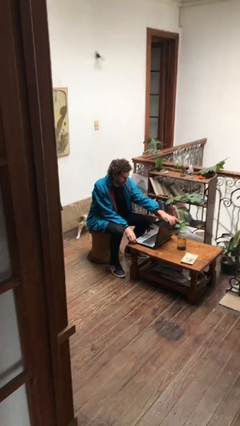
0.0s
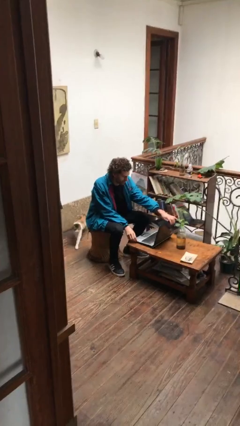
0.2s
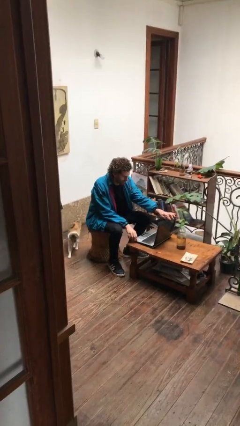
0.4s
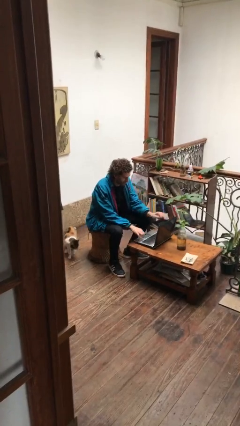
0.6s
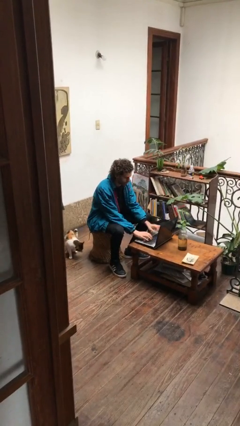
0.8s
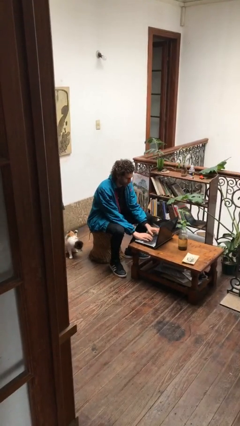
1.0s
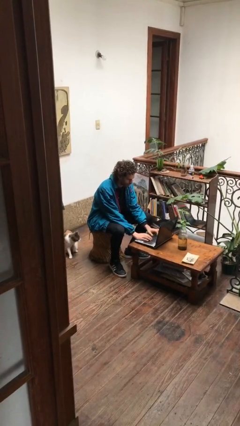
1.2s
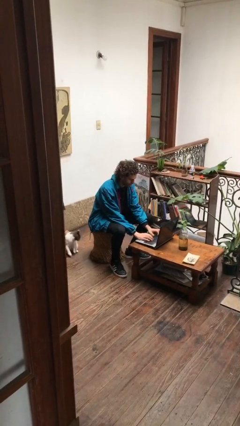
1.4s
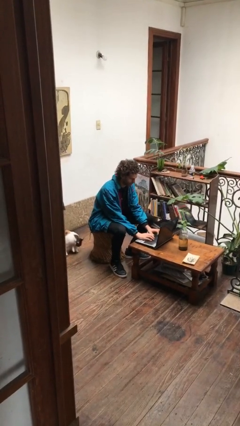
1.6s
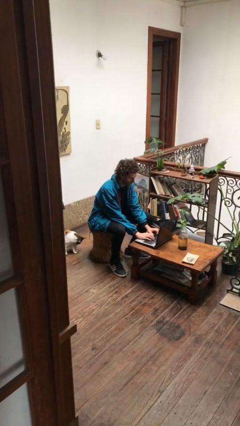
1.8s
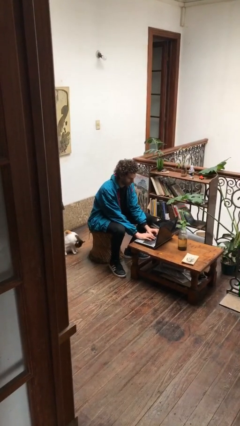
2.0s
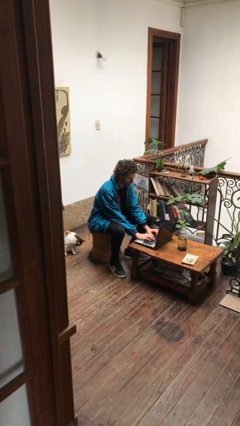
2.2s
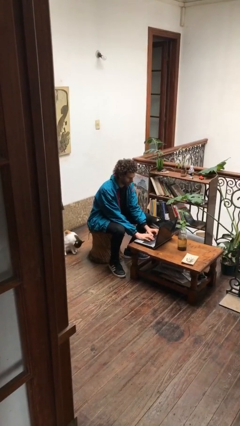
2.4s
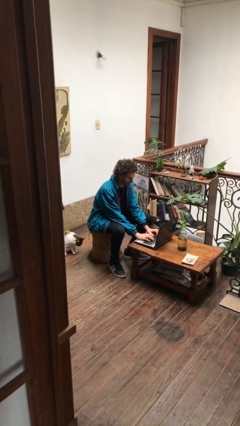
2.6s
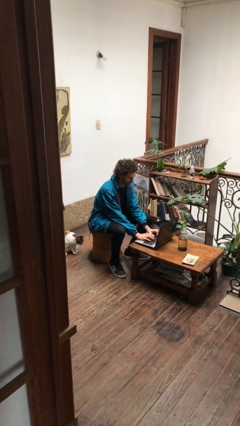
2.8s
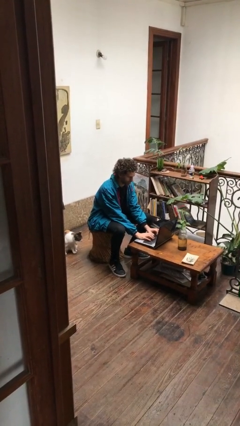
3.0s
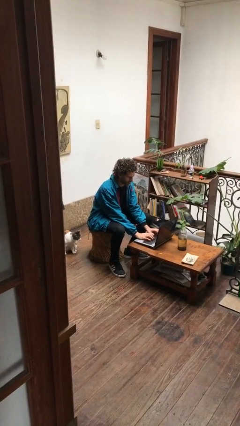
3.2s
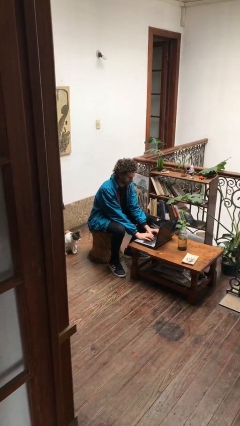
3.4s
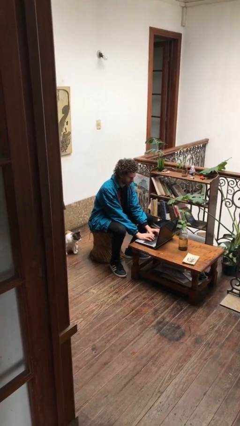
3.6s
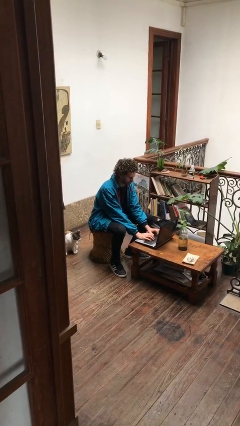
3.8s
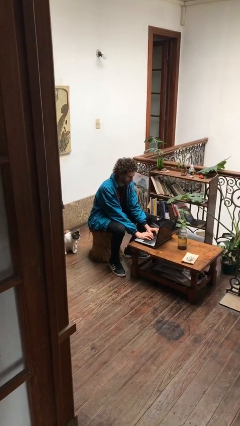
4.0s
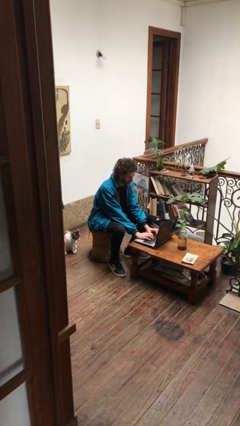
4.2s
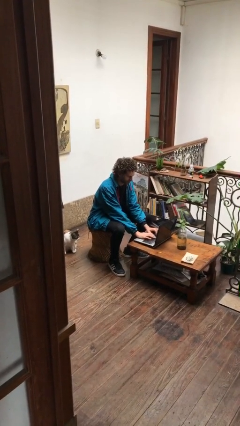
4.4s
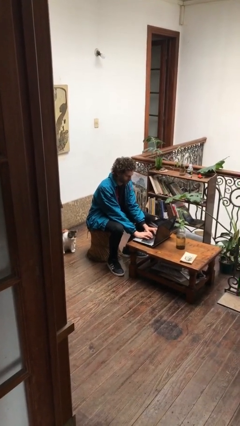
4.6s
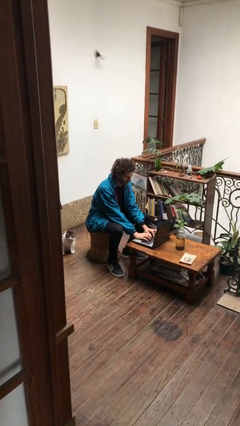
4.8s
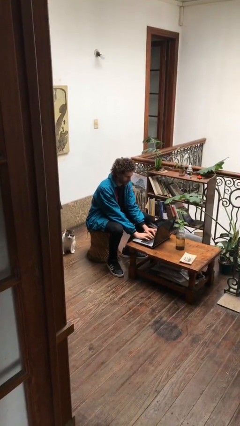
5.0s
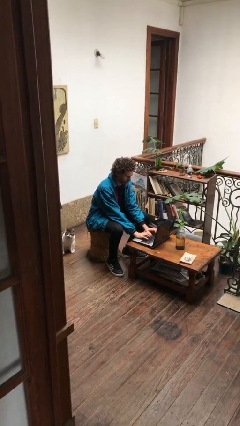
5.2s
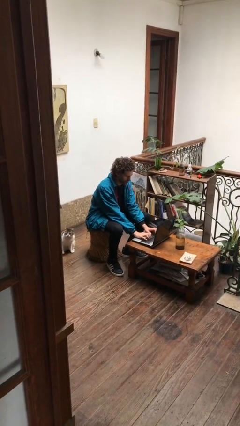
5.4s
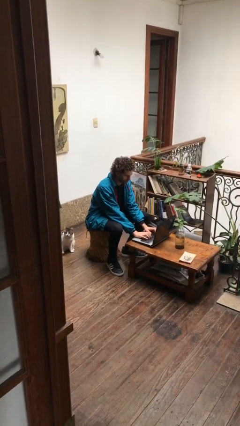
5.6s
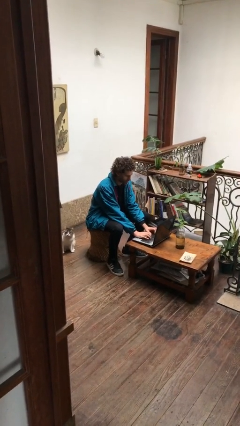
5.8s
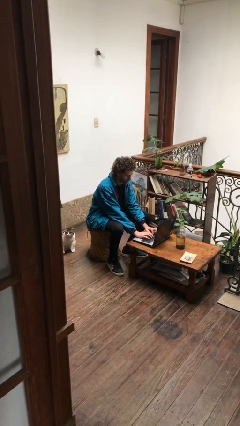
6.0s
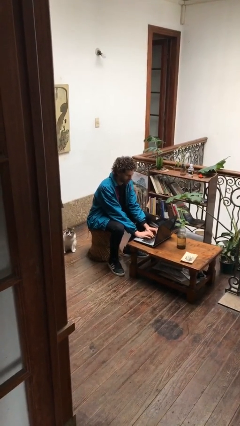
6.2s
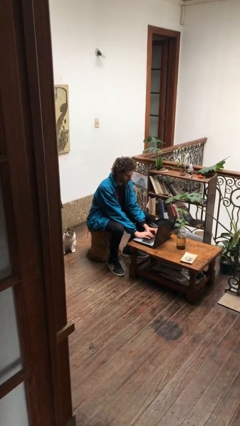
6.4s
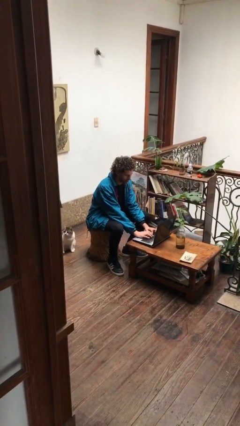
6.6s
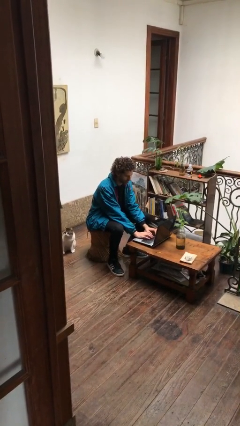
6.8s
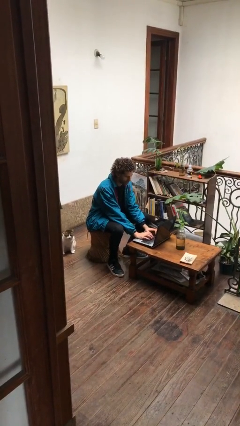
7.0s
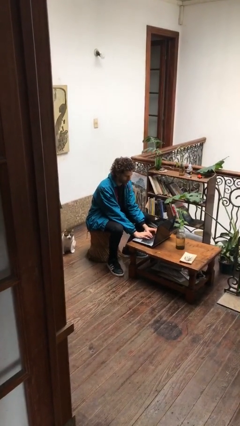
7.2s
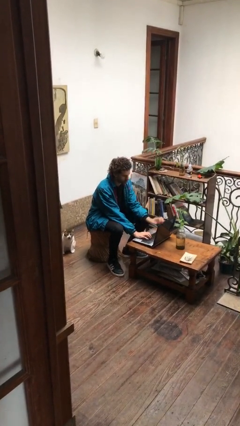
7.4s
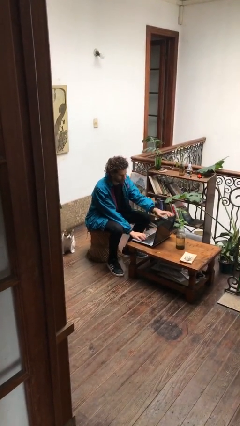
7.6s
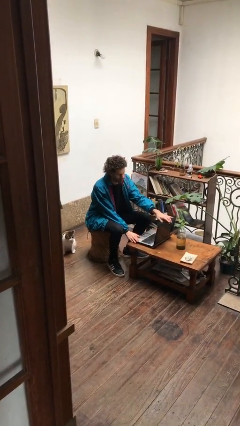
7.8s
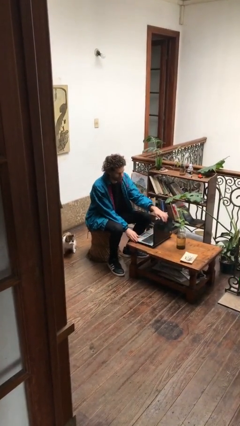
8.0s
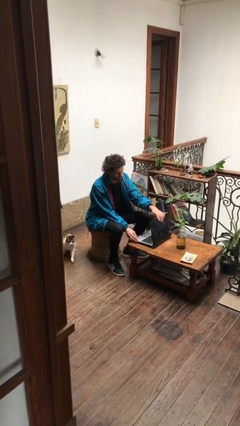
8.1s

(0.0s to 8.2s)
person interacts with laptop

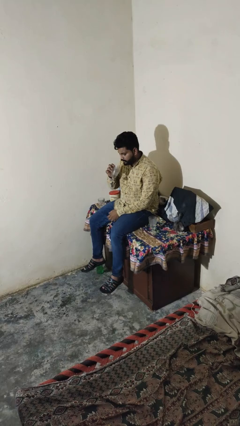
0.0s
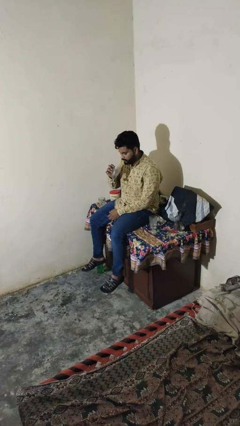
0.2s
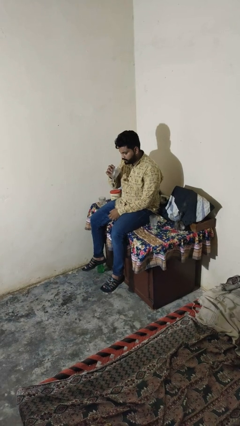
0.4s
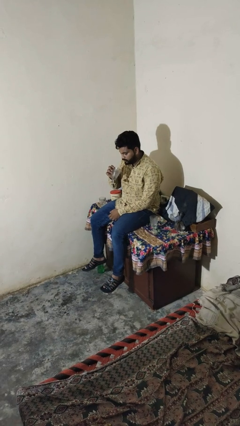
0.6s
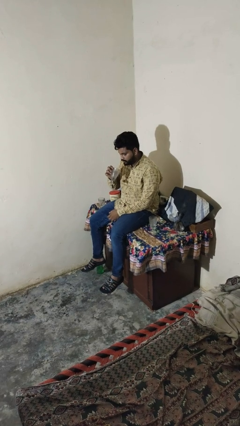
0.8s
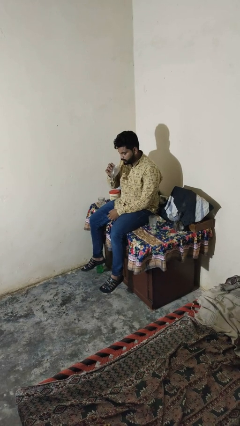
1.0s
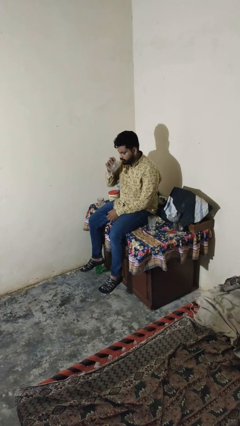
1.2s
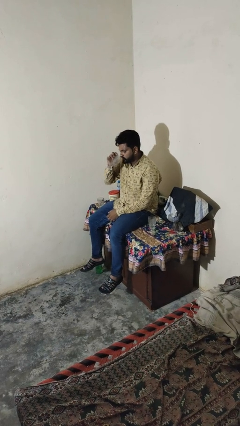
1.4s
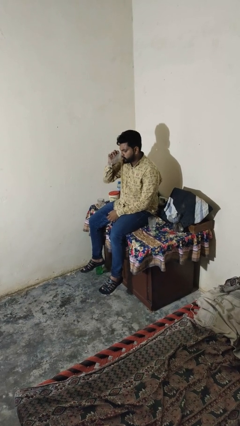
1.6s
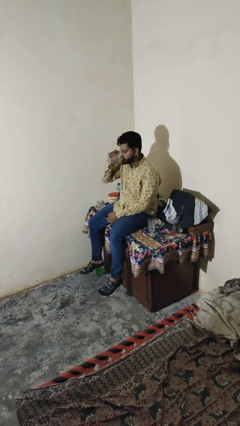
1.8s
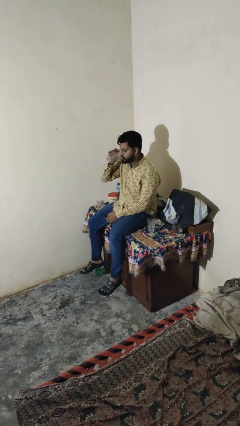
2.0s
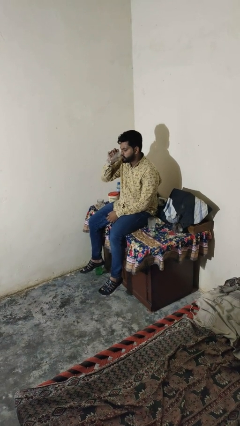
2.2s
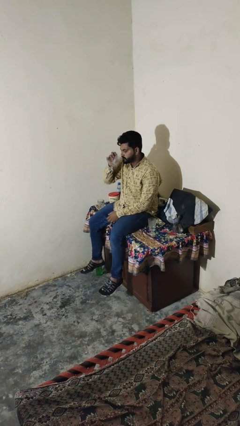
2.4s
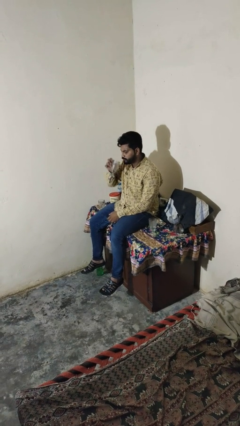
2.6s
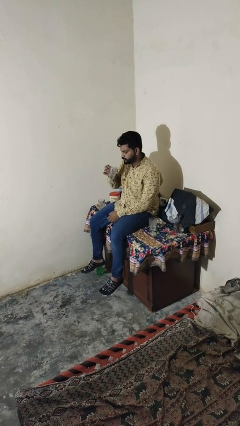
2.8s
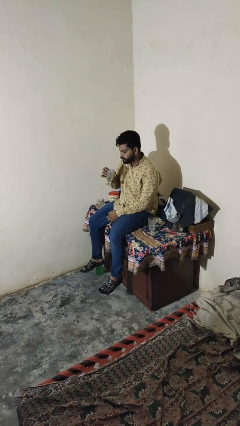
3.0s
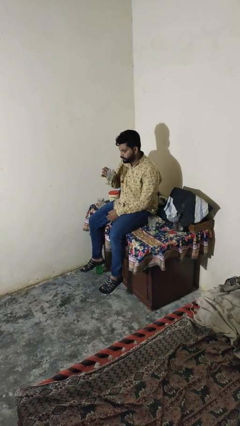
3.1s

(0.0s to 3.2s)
person drinks from shotglass

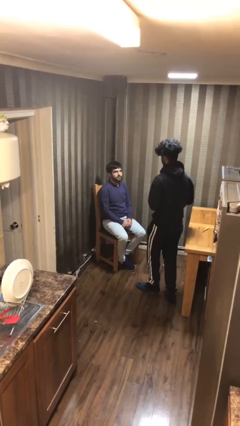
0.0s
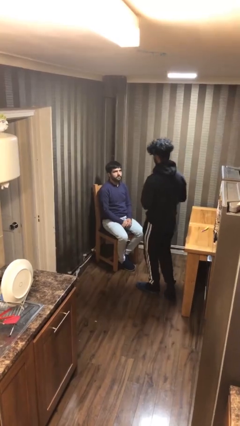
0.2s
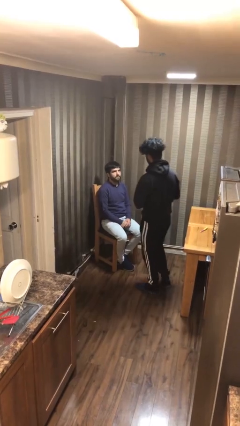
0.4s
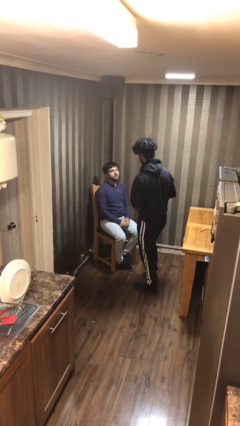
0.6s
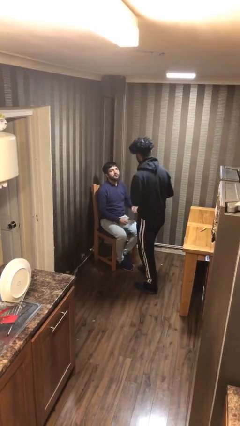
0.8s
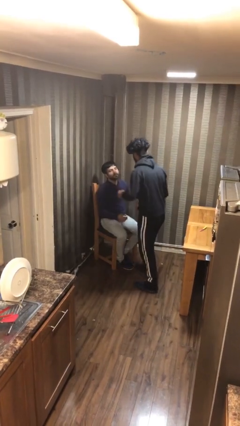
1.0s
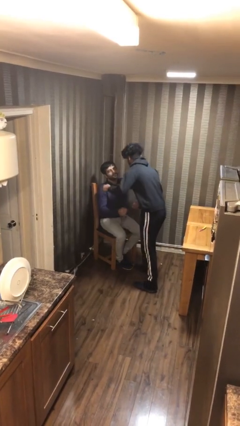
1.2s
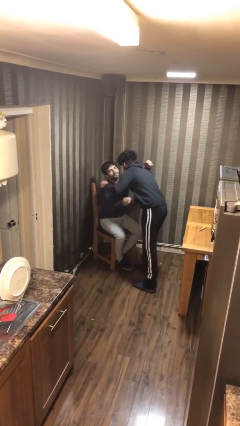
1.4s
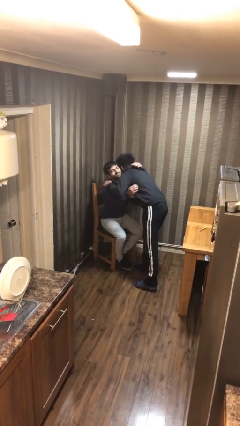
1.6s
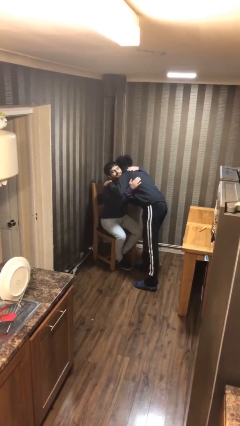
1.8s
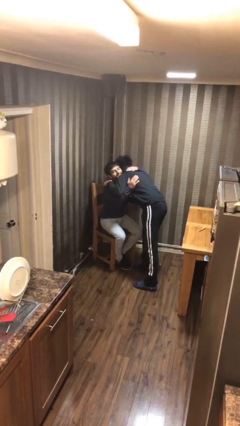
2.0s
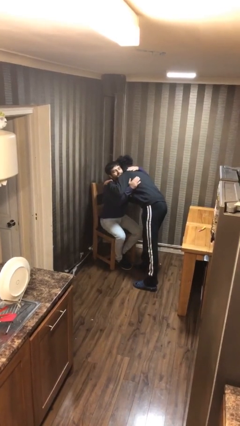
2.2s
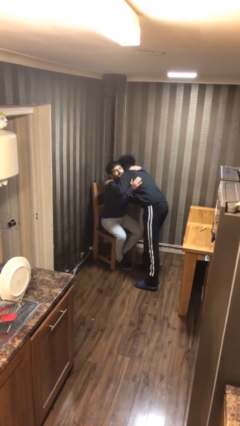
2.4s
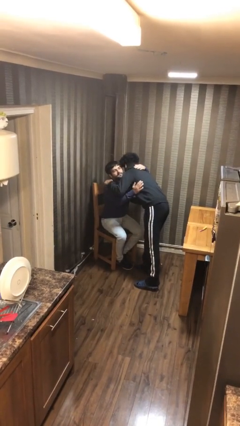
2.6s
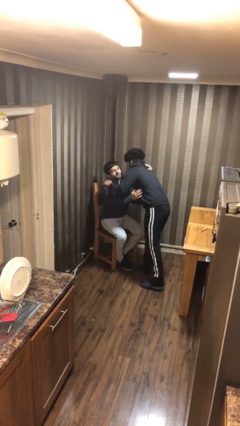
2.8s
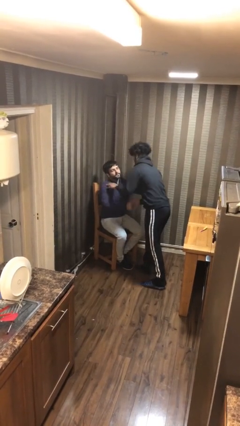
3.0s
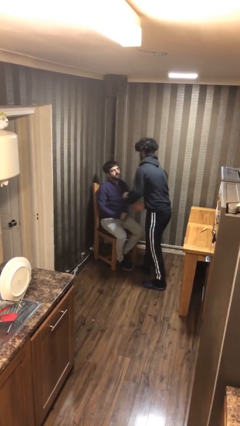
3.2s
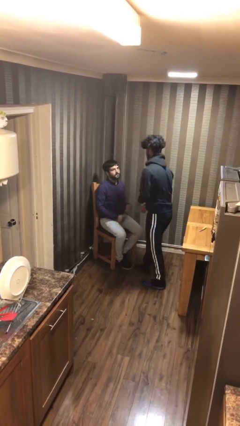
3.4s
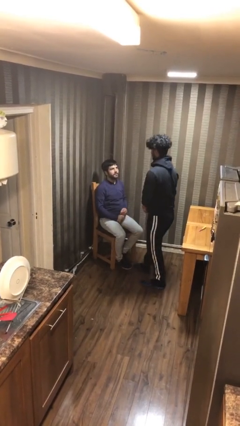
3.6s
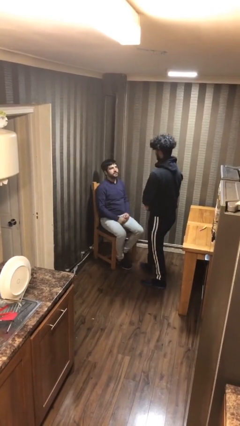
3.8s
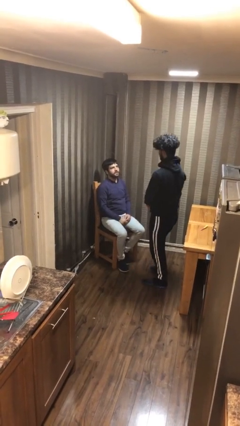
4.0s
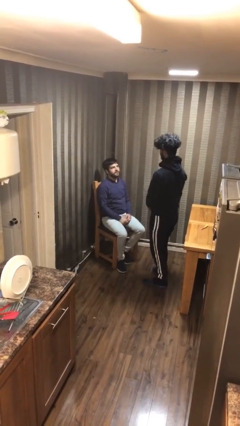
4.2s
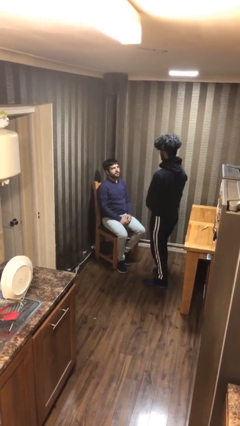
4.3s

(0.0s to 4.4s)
person embraces person

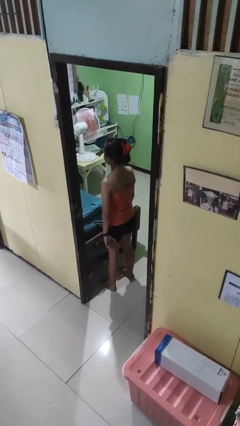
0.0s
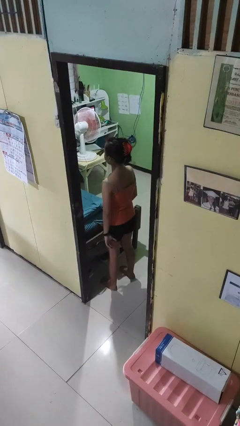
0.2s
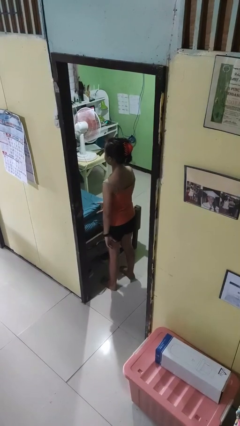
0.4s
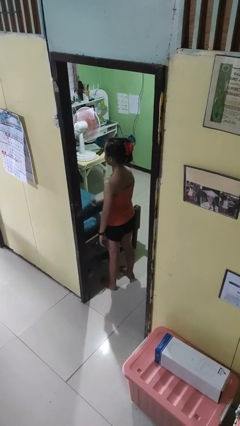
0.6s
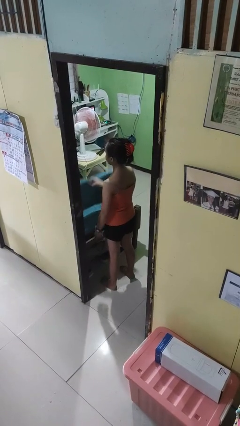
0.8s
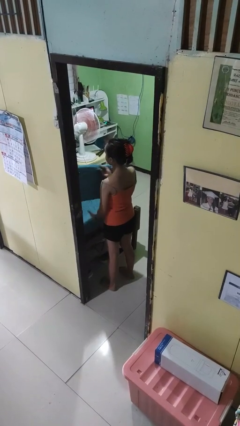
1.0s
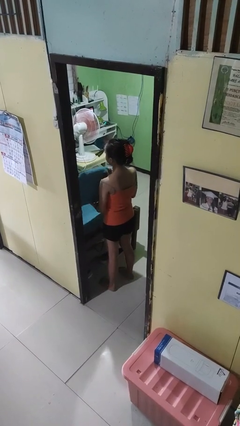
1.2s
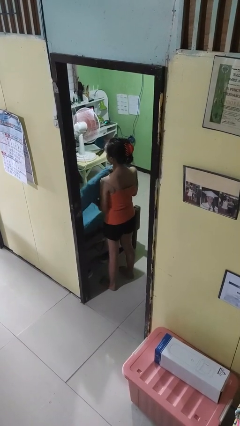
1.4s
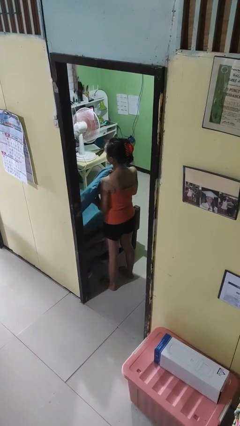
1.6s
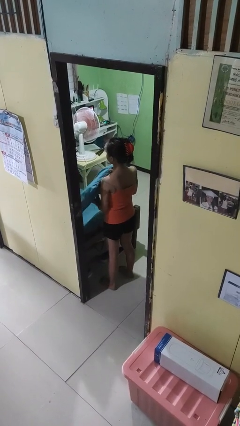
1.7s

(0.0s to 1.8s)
person picks up object from bed
